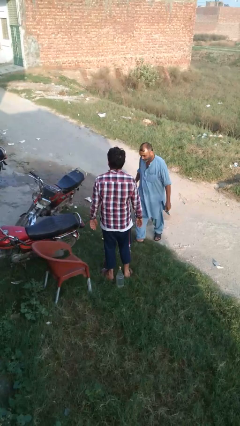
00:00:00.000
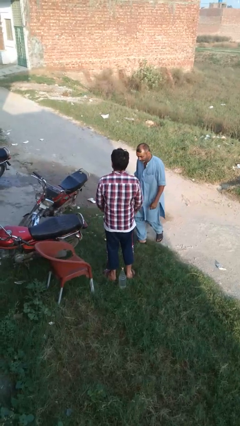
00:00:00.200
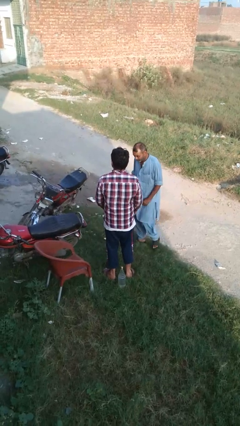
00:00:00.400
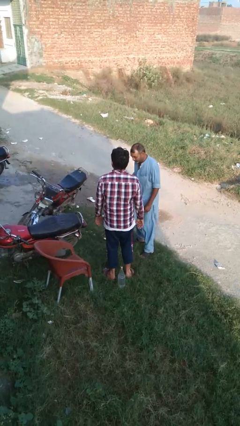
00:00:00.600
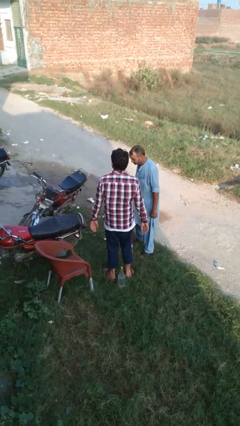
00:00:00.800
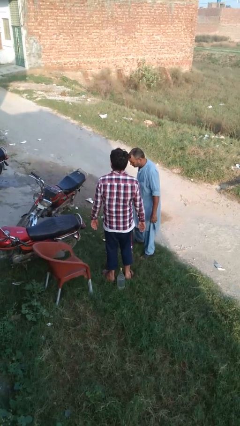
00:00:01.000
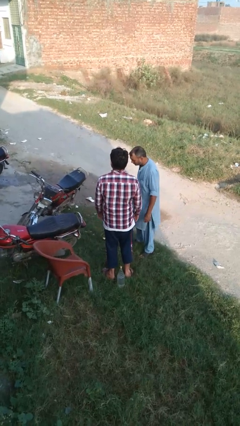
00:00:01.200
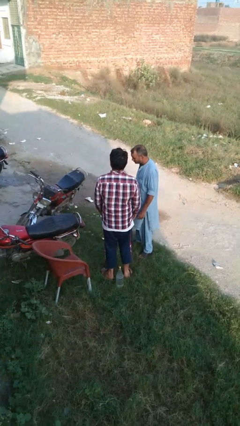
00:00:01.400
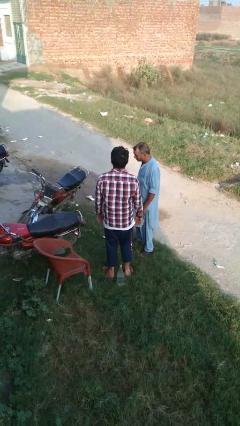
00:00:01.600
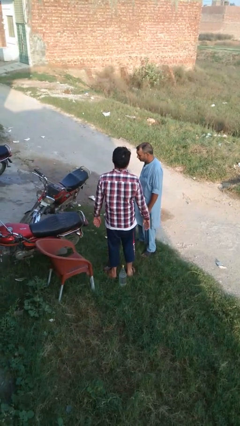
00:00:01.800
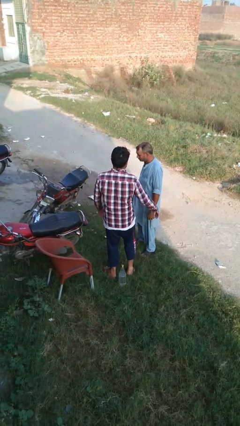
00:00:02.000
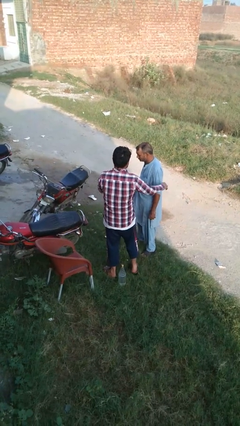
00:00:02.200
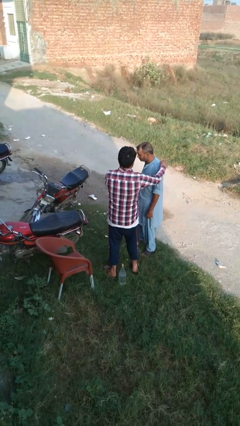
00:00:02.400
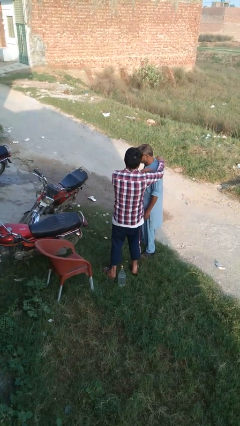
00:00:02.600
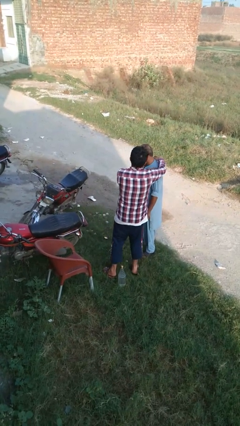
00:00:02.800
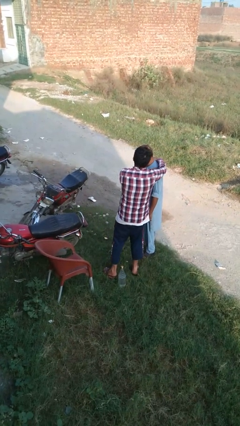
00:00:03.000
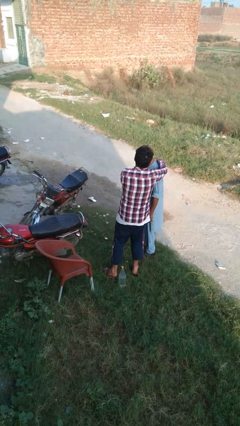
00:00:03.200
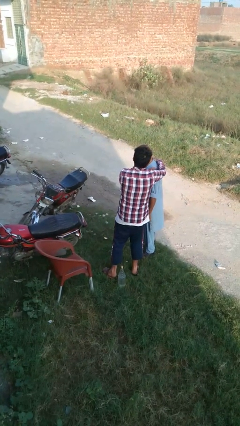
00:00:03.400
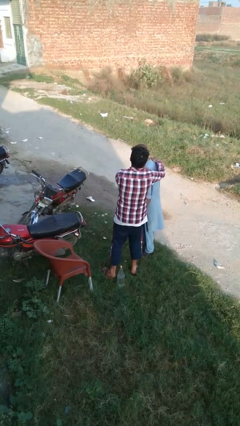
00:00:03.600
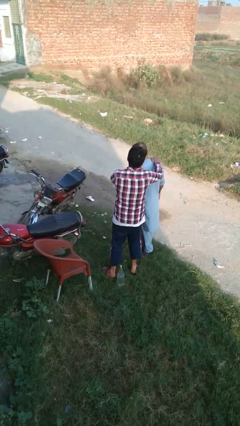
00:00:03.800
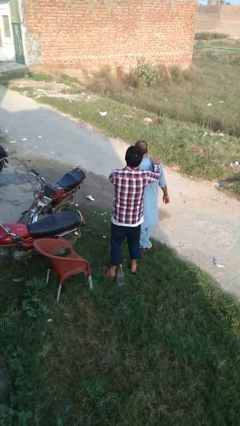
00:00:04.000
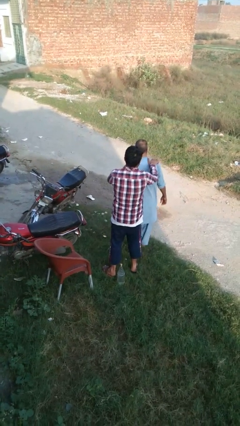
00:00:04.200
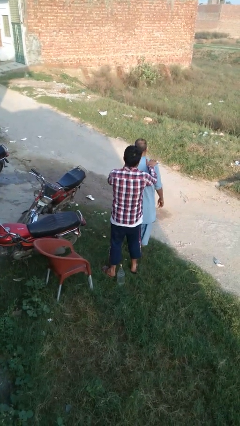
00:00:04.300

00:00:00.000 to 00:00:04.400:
person grabs person by shoulder

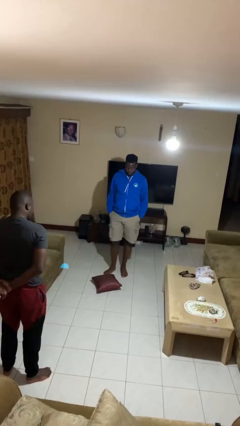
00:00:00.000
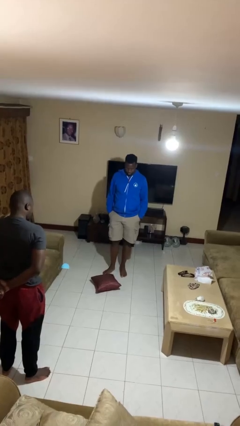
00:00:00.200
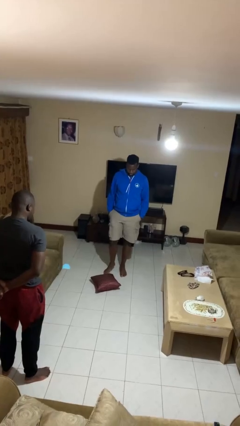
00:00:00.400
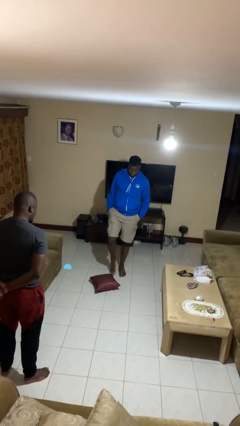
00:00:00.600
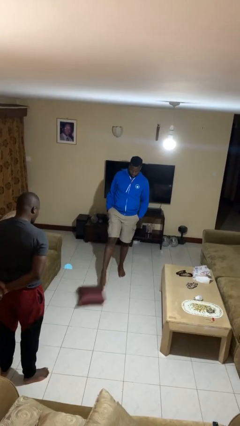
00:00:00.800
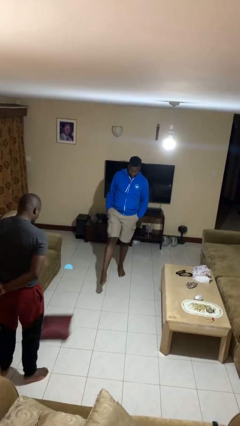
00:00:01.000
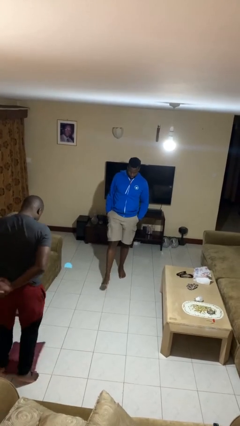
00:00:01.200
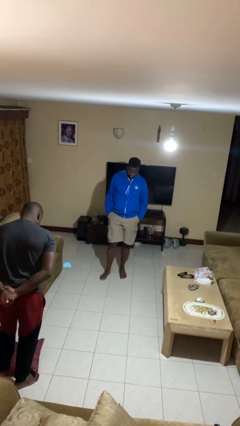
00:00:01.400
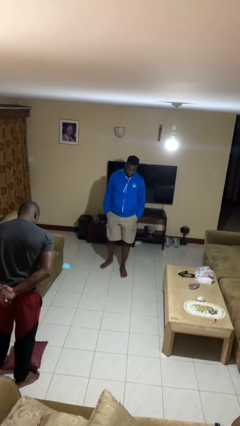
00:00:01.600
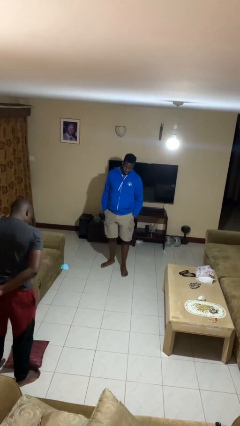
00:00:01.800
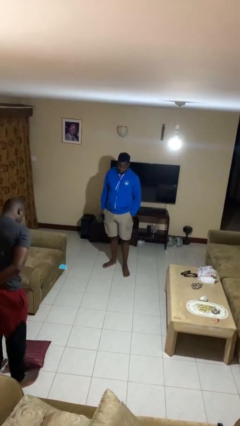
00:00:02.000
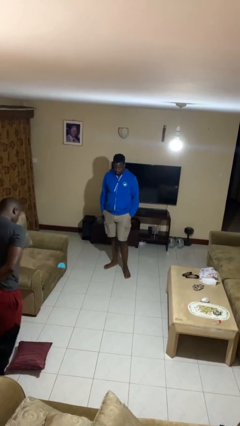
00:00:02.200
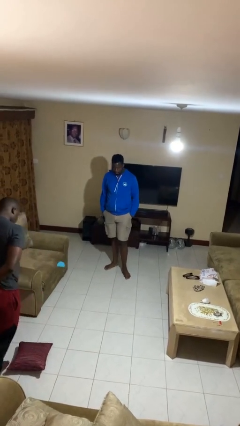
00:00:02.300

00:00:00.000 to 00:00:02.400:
person kicks object to person

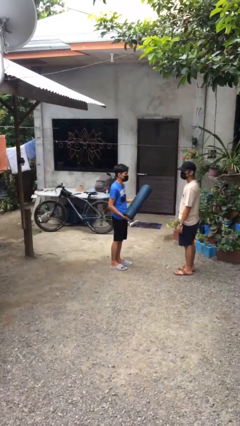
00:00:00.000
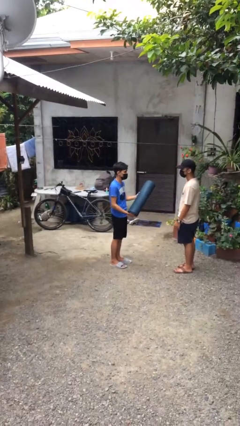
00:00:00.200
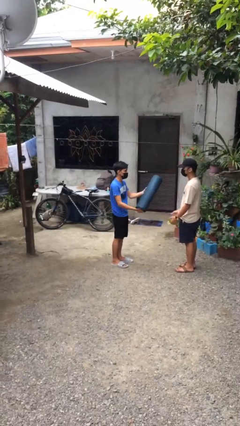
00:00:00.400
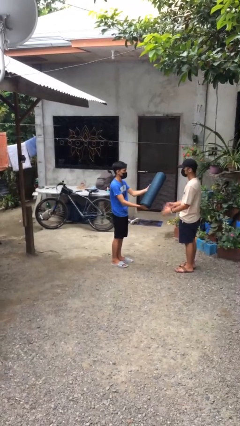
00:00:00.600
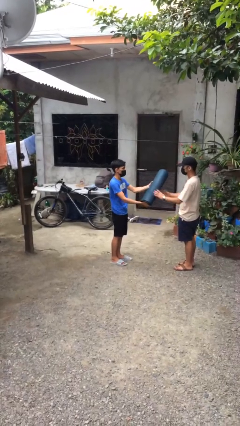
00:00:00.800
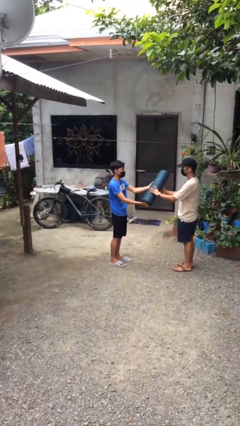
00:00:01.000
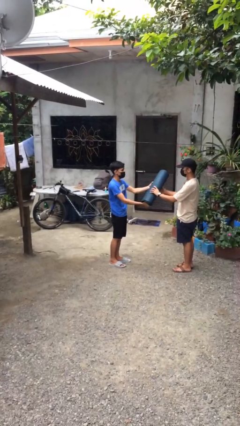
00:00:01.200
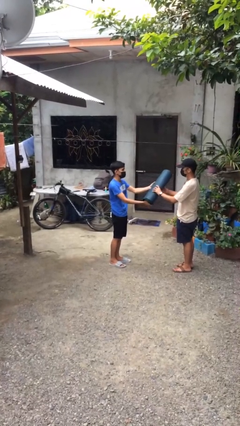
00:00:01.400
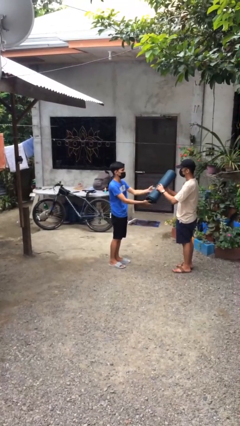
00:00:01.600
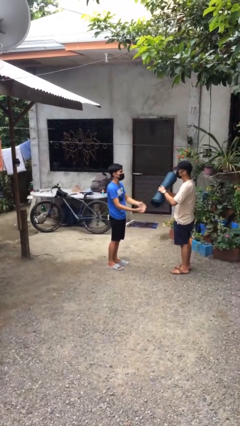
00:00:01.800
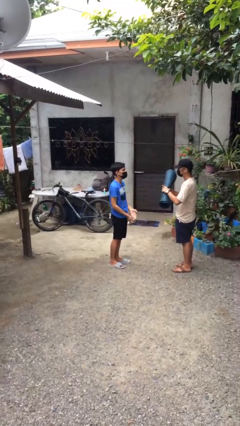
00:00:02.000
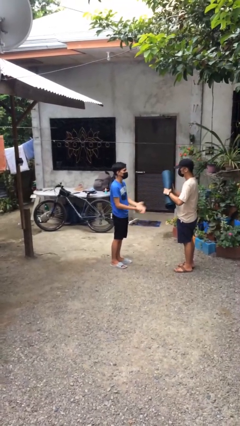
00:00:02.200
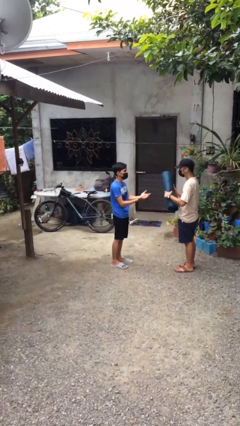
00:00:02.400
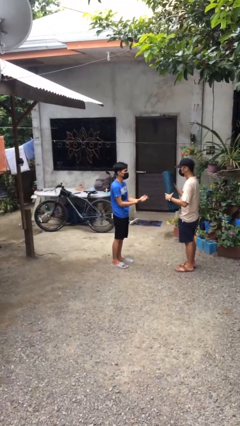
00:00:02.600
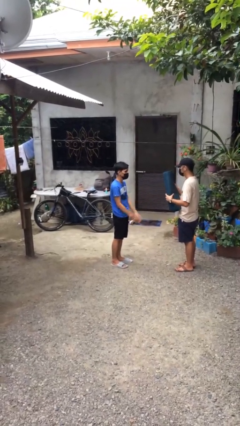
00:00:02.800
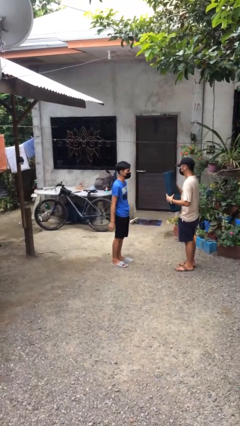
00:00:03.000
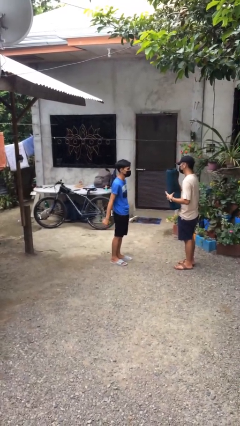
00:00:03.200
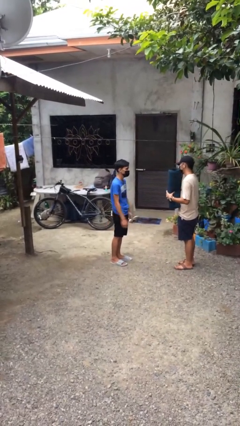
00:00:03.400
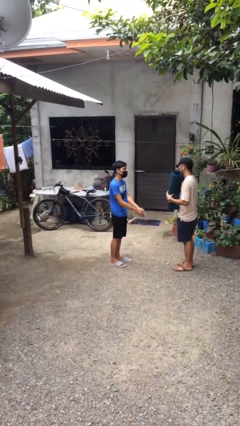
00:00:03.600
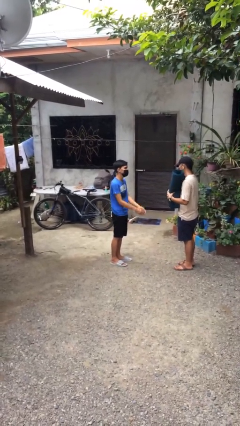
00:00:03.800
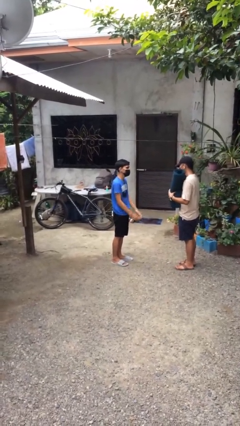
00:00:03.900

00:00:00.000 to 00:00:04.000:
person transfers object to person

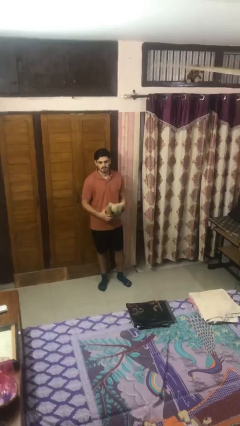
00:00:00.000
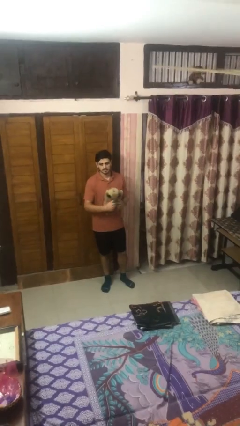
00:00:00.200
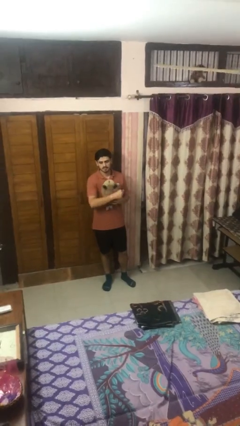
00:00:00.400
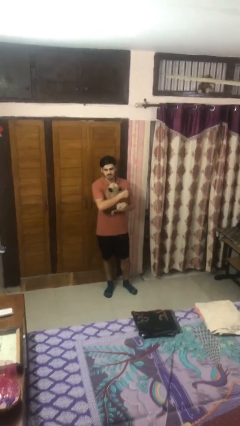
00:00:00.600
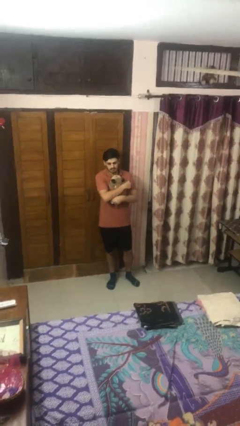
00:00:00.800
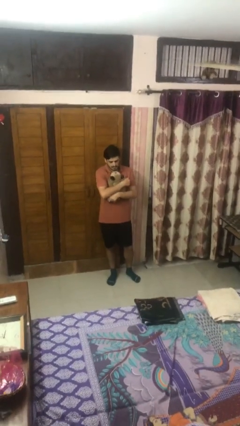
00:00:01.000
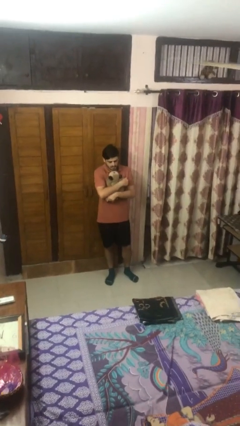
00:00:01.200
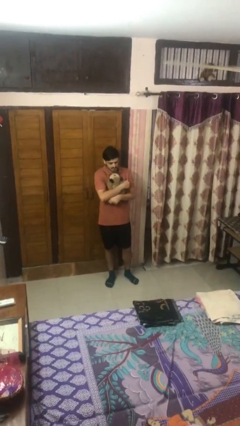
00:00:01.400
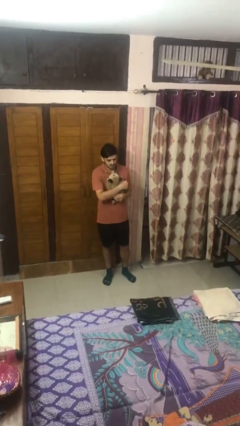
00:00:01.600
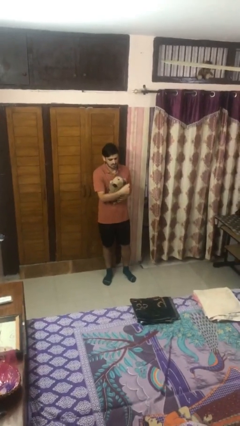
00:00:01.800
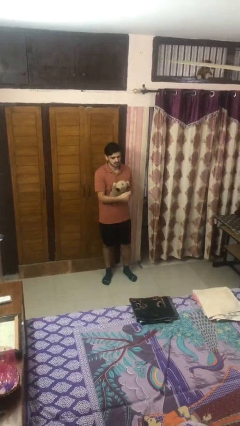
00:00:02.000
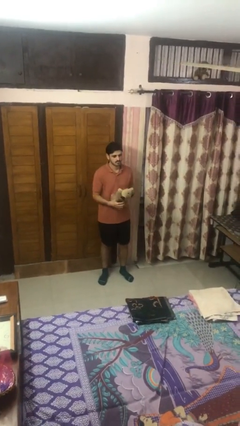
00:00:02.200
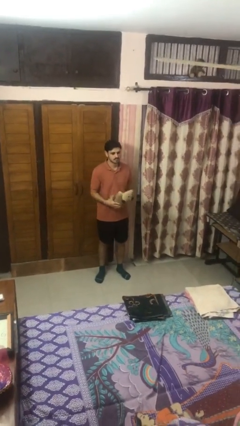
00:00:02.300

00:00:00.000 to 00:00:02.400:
person hugs stuffed animal

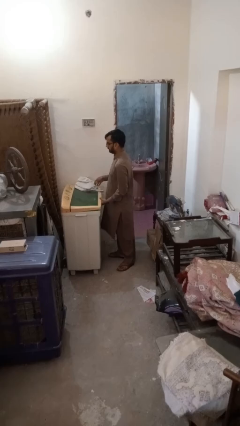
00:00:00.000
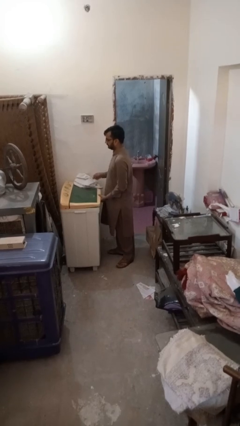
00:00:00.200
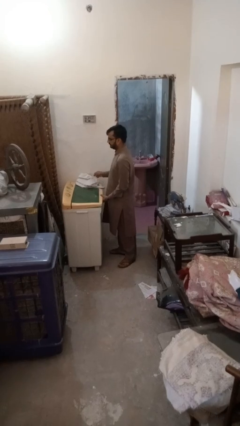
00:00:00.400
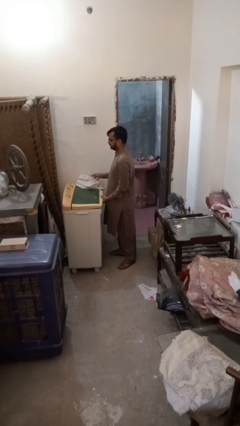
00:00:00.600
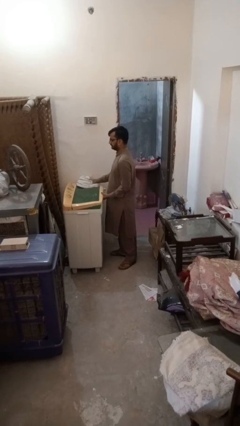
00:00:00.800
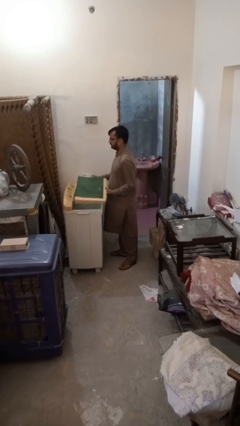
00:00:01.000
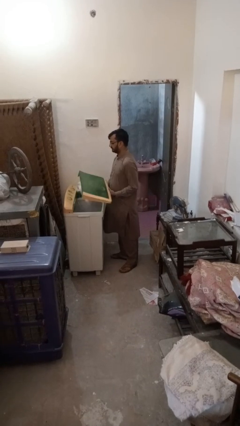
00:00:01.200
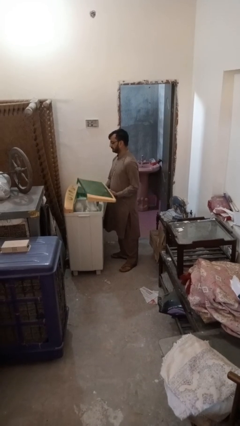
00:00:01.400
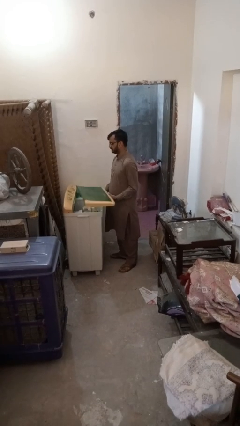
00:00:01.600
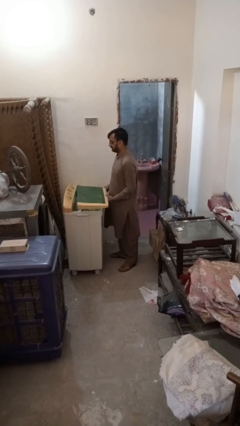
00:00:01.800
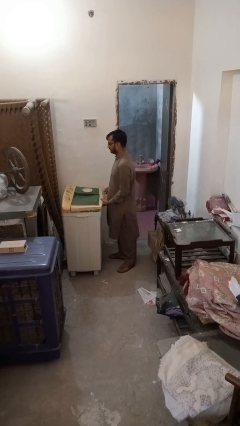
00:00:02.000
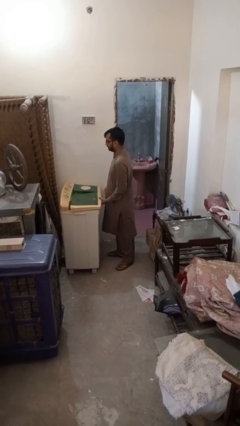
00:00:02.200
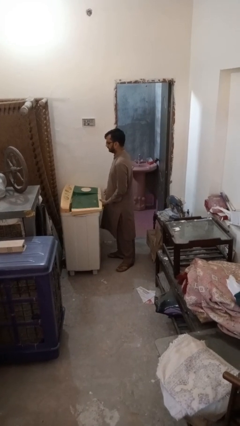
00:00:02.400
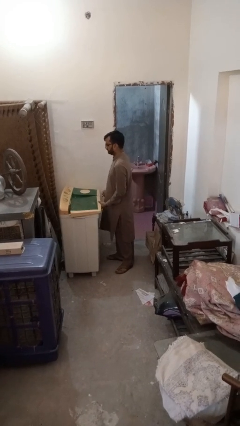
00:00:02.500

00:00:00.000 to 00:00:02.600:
person loads clotheswasher

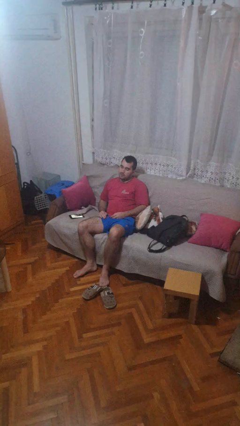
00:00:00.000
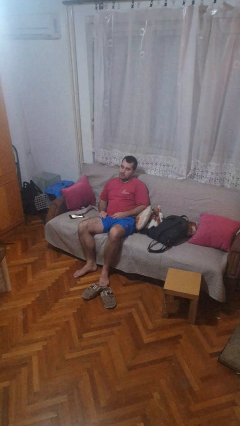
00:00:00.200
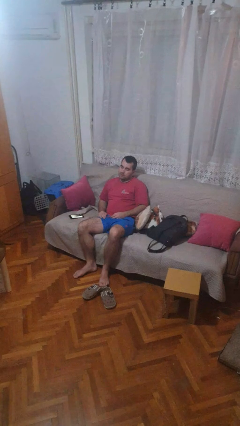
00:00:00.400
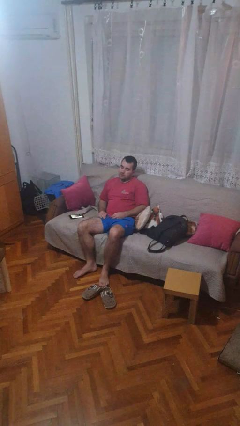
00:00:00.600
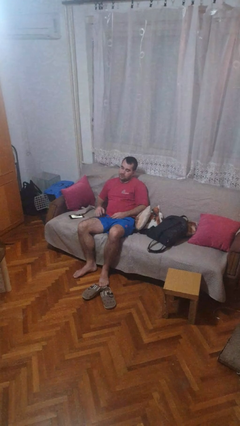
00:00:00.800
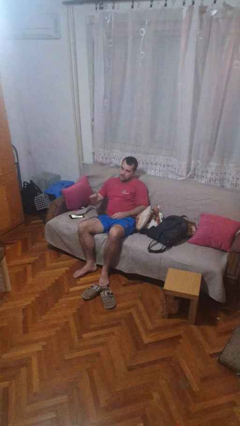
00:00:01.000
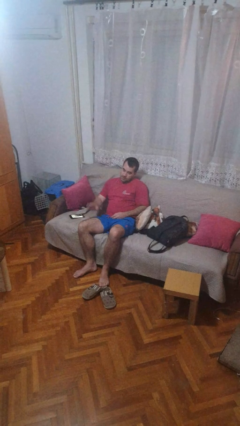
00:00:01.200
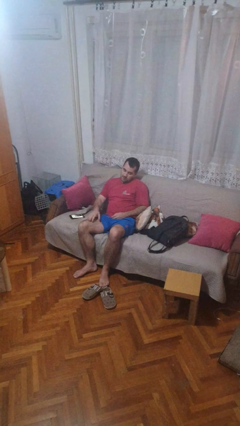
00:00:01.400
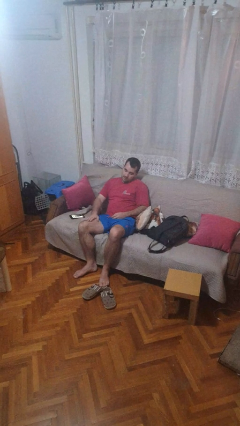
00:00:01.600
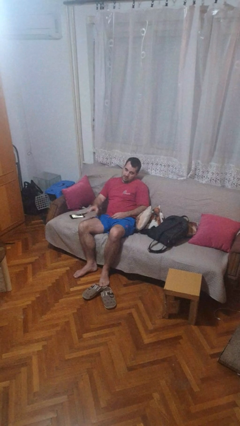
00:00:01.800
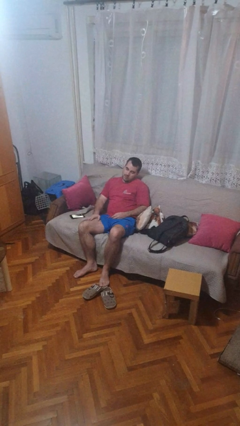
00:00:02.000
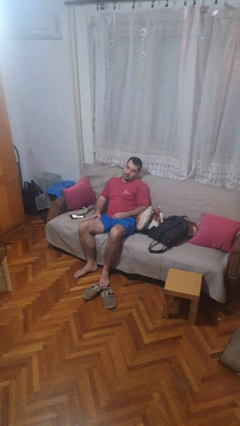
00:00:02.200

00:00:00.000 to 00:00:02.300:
person slaps hands on thighs
